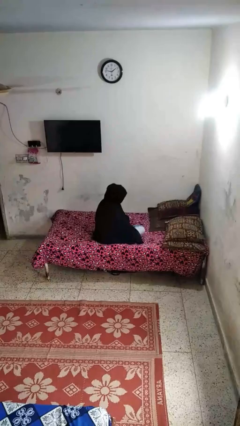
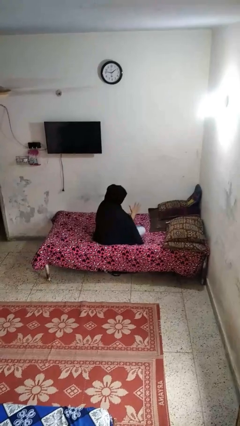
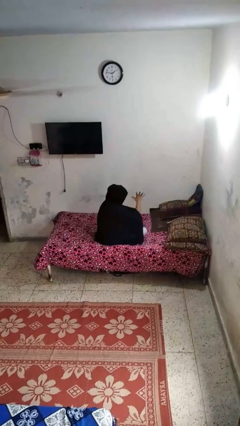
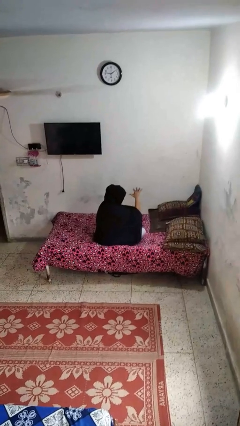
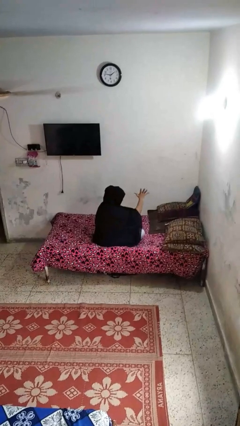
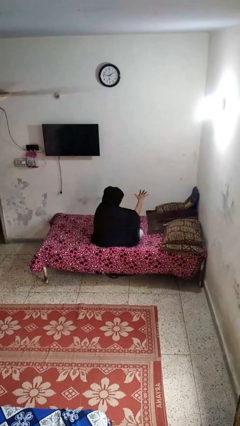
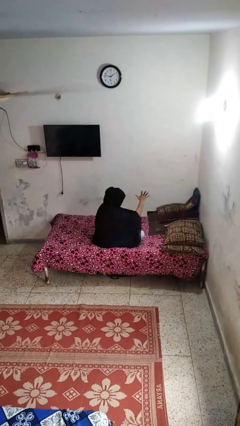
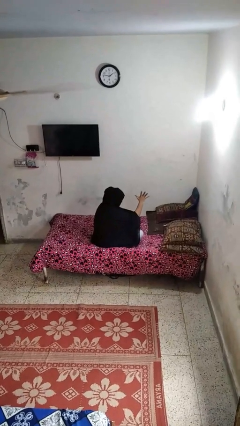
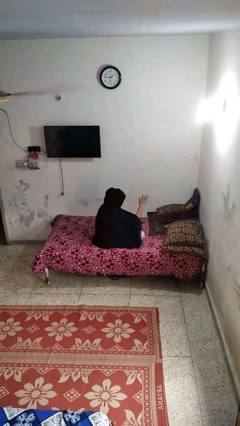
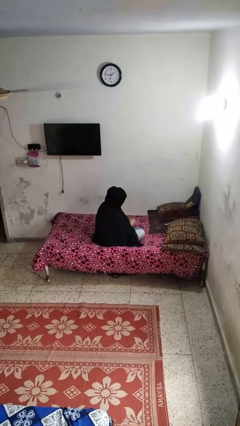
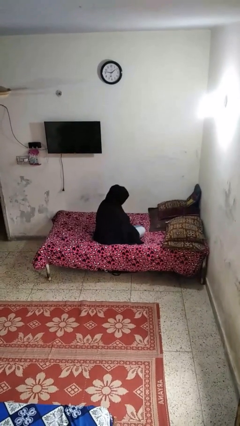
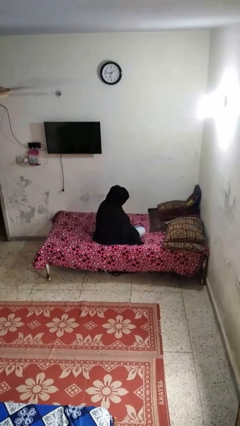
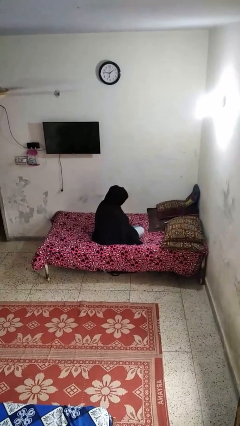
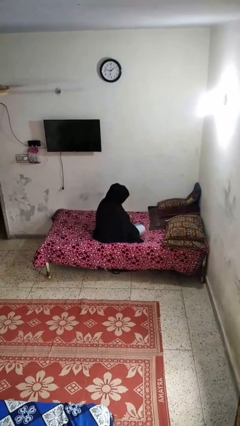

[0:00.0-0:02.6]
person gestures number five

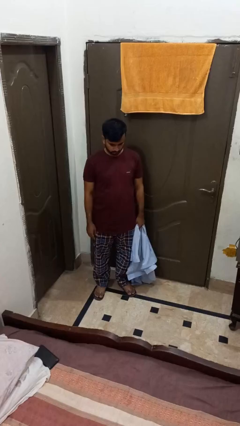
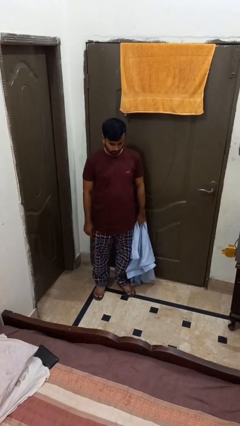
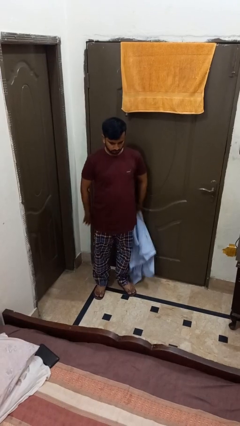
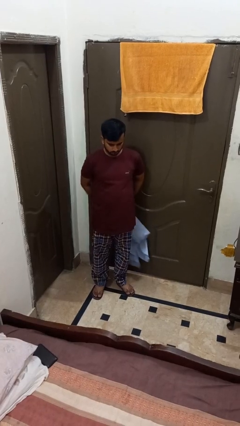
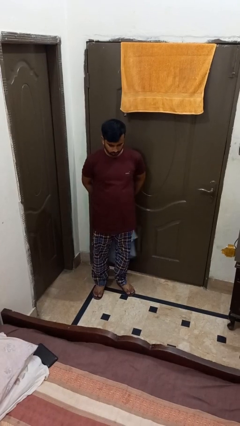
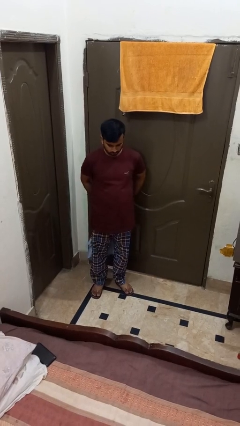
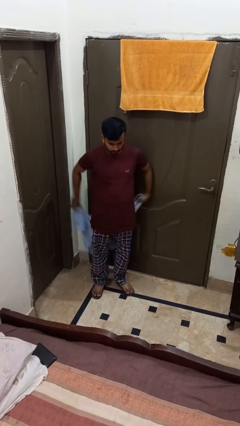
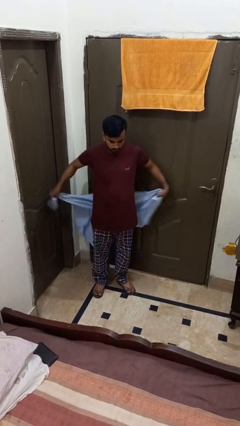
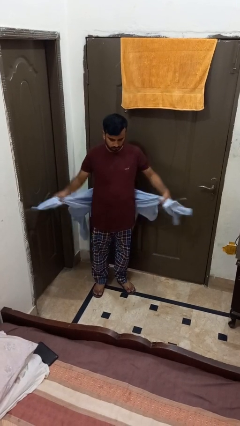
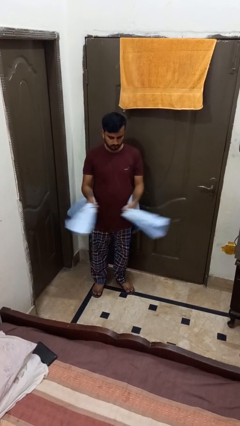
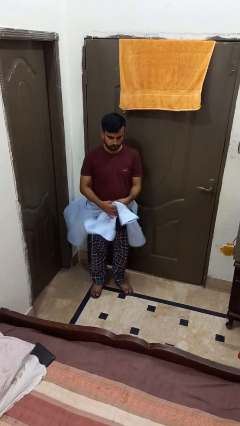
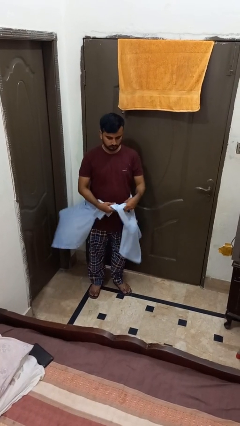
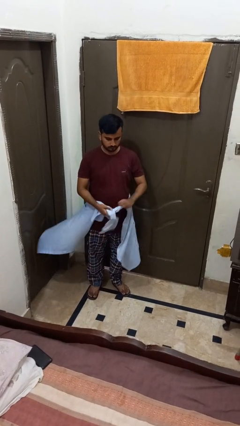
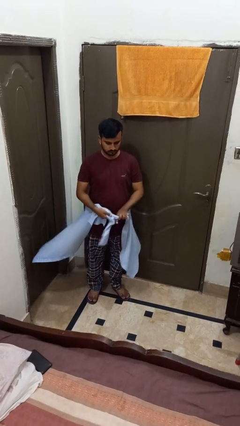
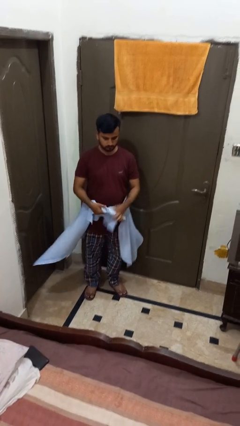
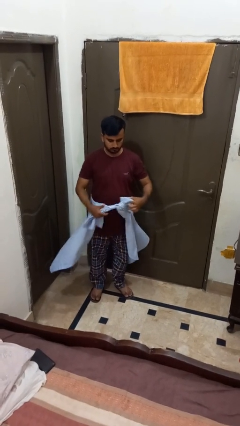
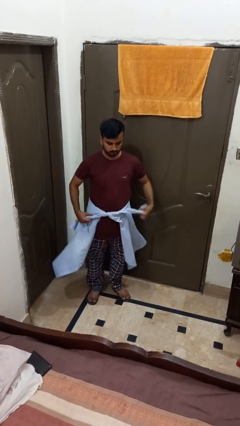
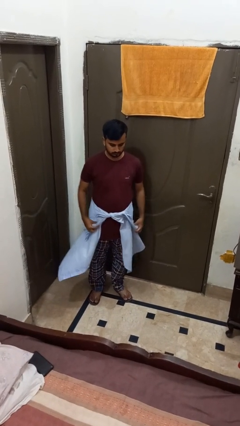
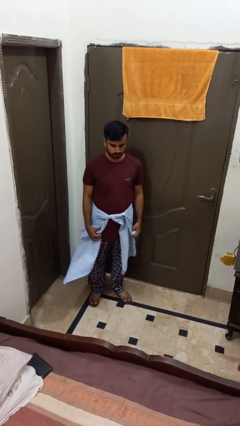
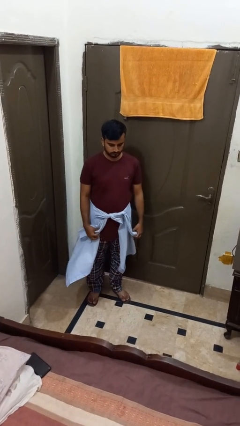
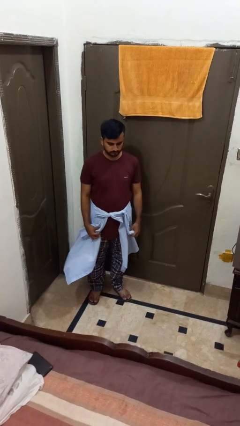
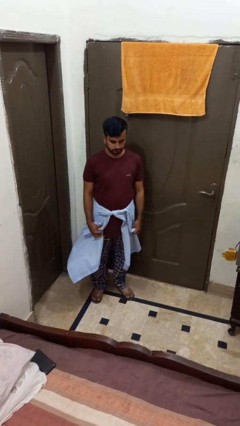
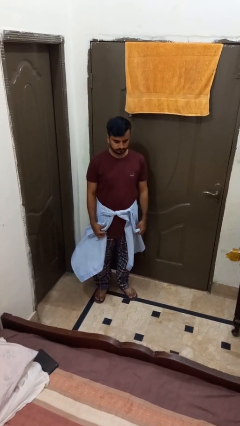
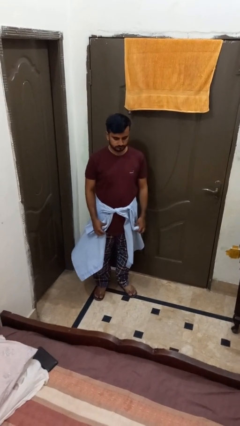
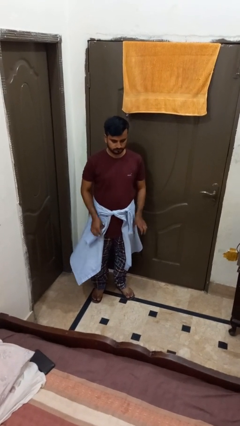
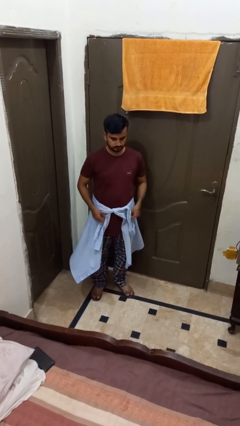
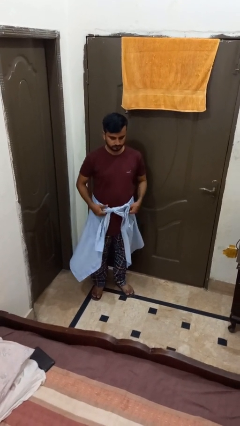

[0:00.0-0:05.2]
person ties jacket around waist

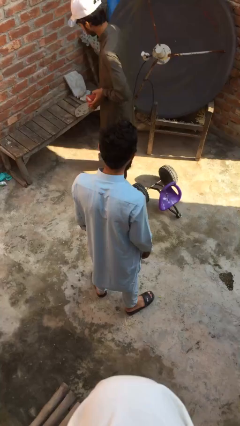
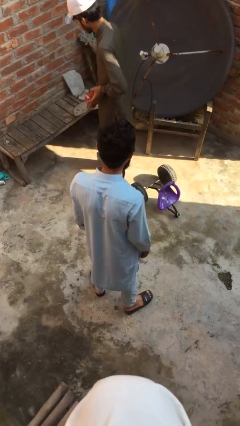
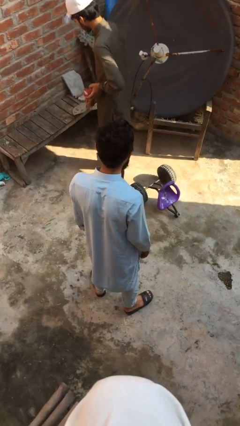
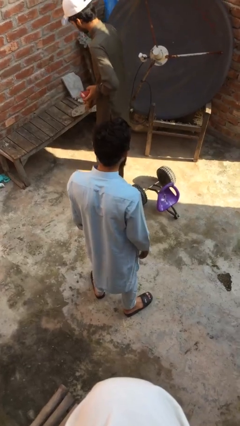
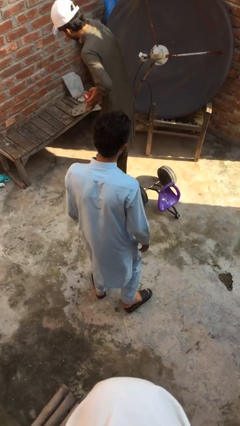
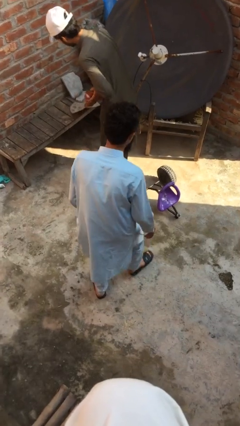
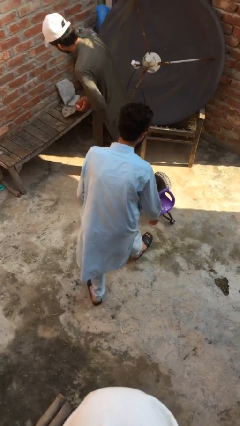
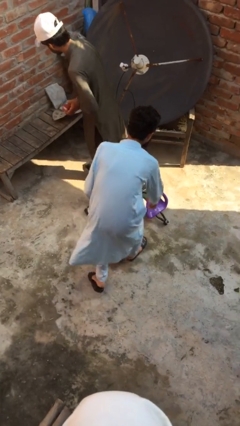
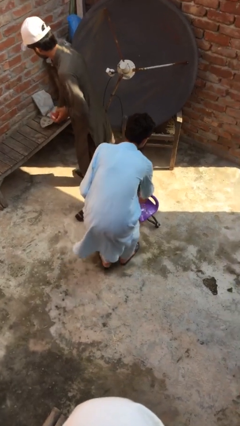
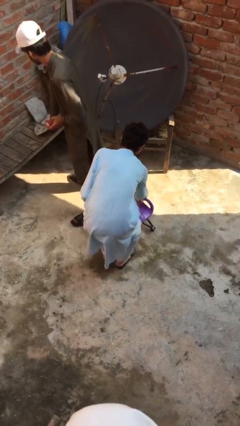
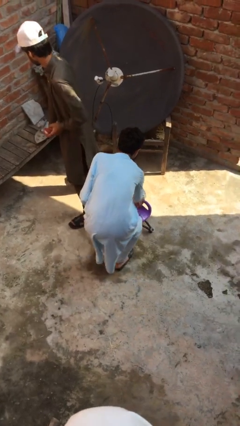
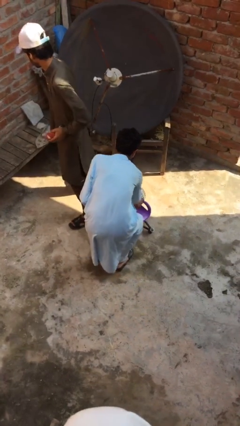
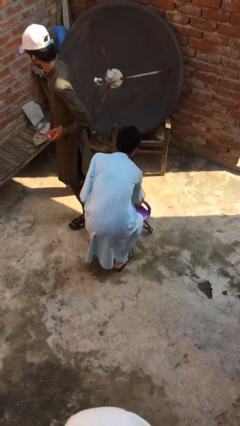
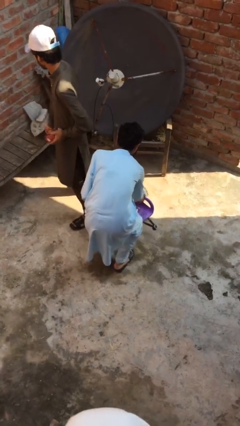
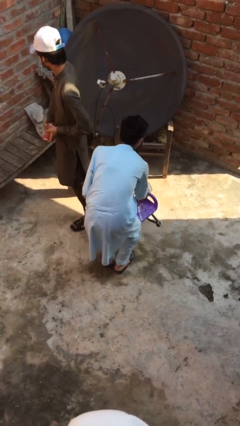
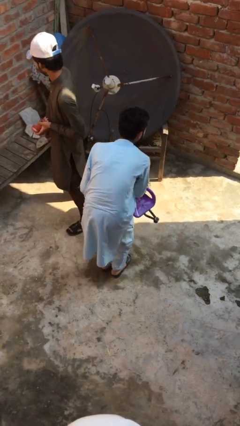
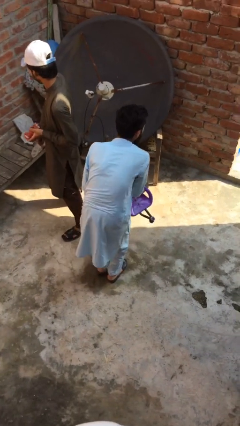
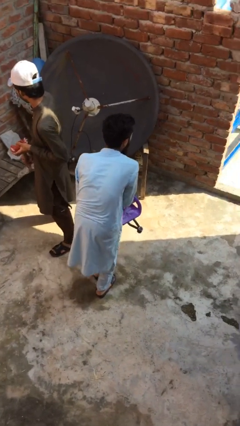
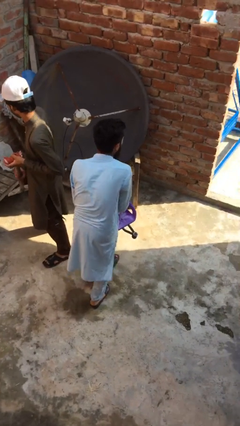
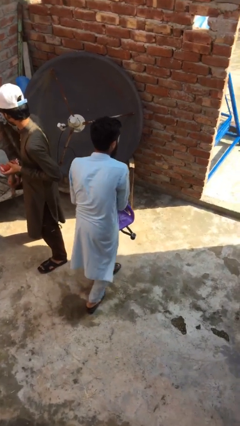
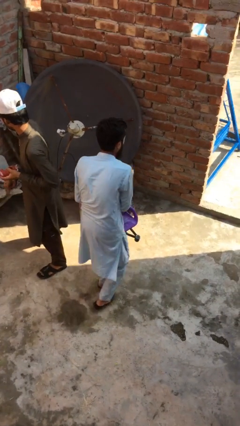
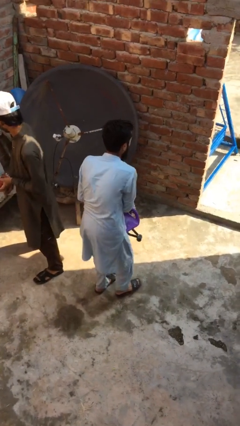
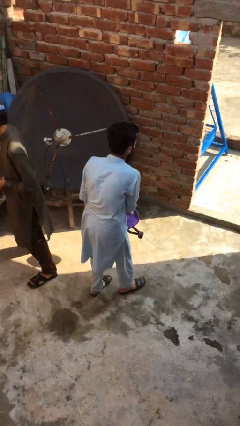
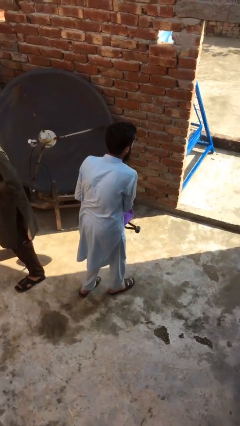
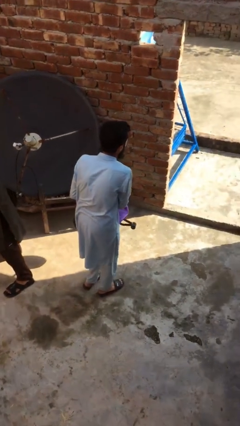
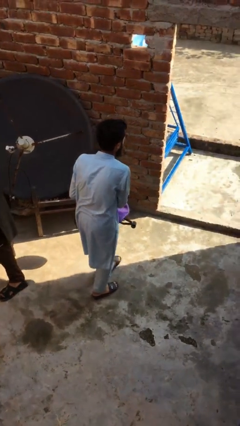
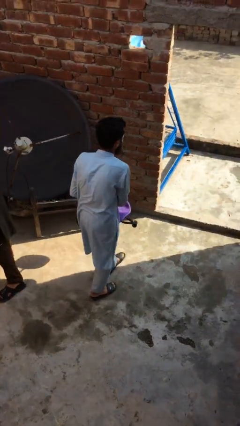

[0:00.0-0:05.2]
person steals object from person

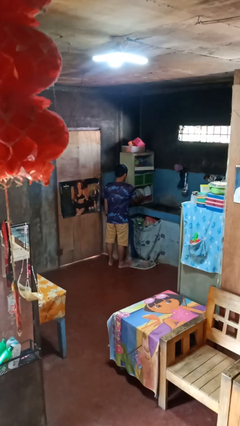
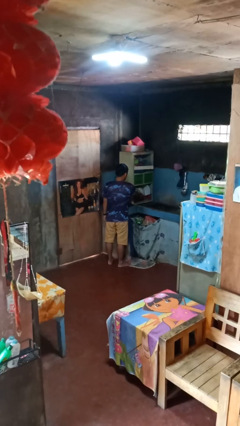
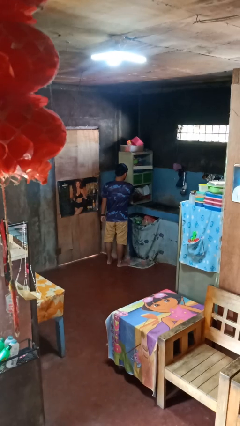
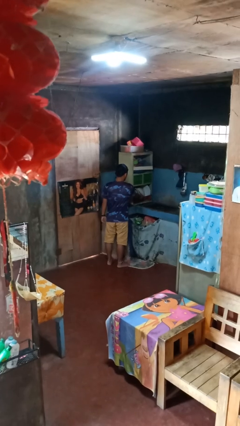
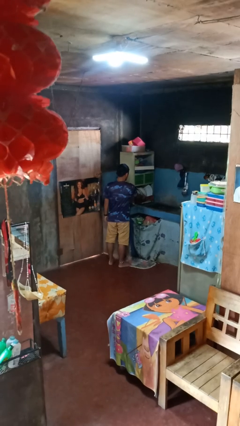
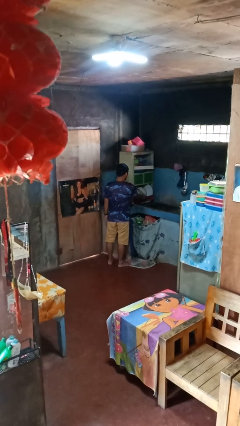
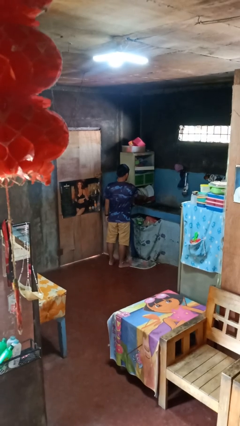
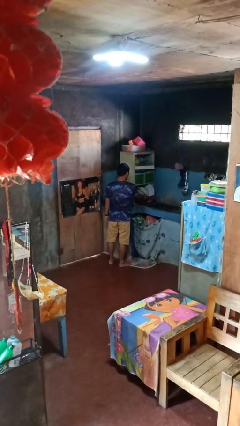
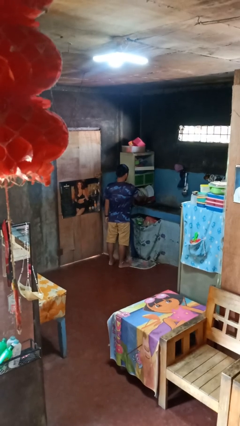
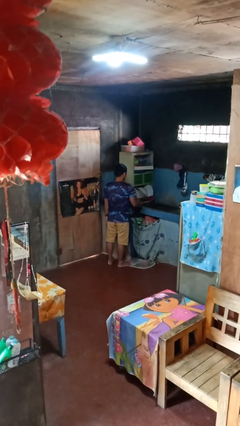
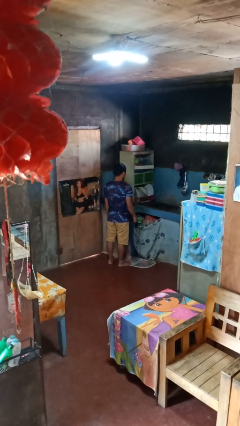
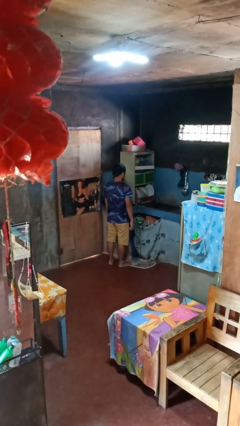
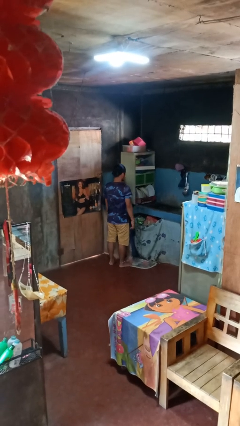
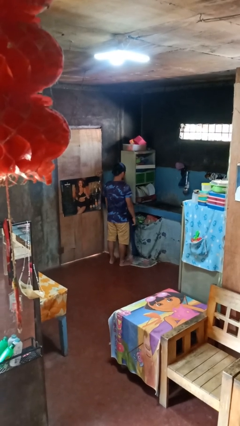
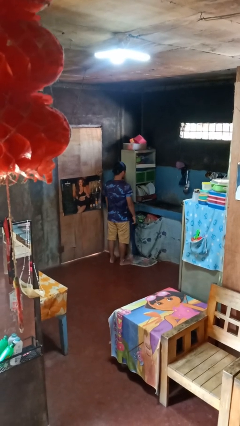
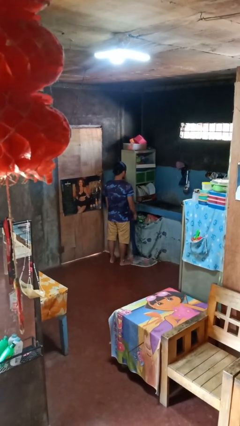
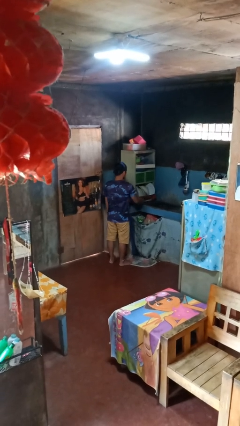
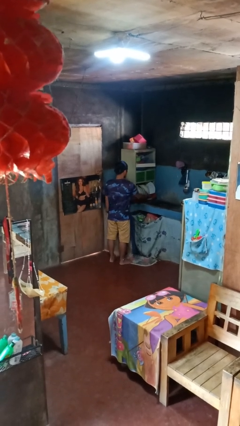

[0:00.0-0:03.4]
person opens dishwasher

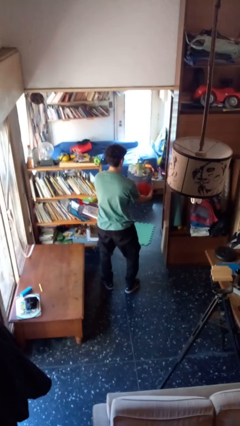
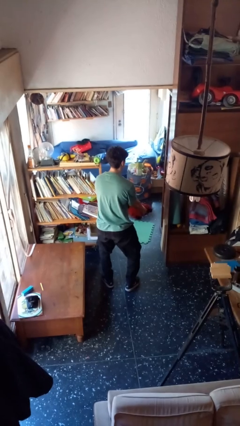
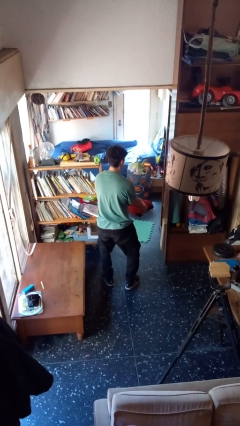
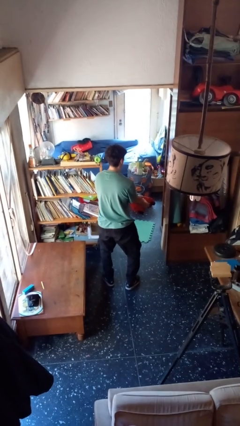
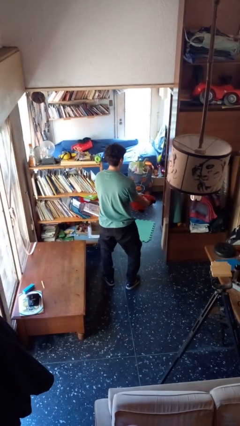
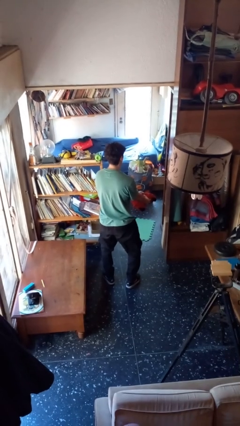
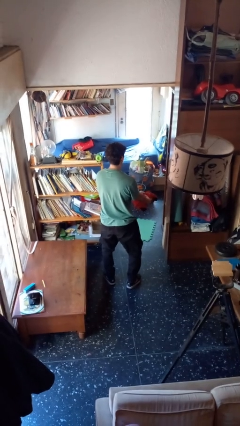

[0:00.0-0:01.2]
person catches dropped object
